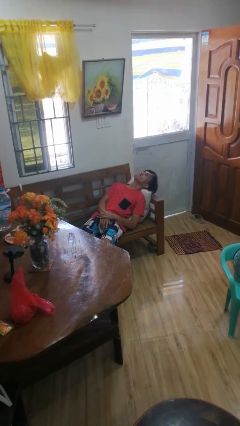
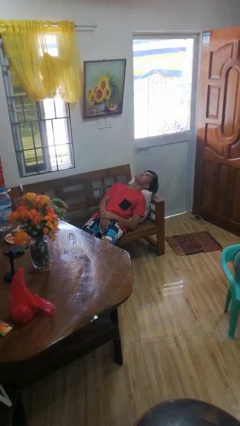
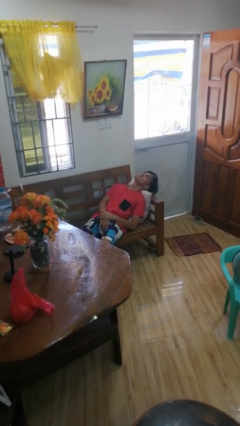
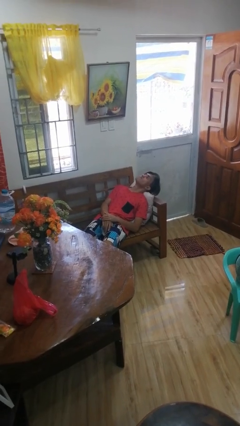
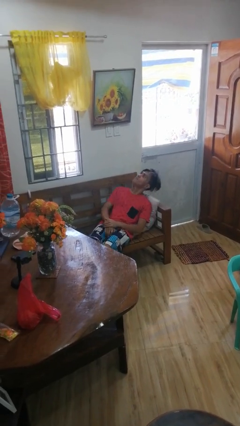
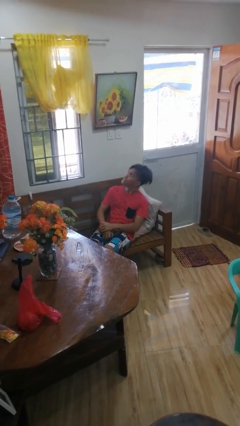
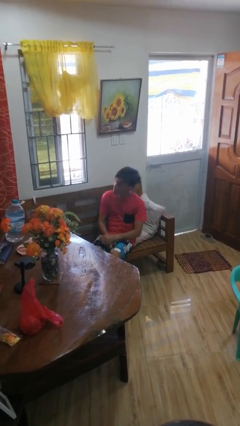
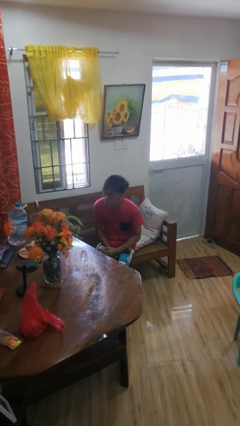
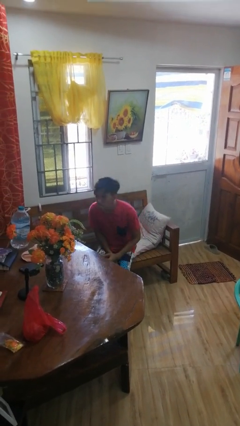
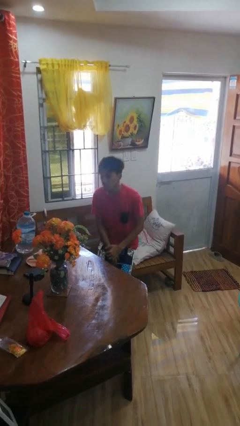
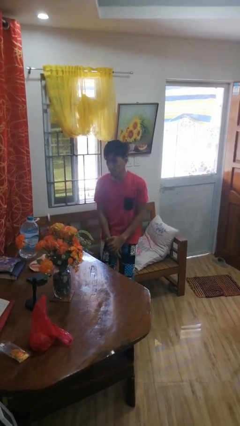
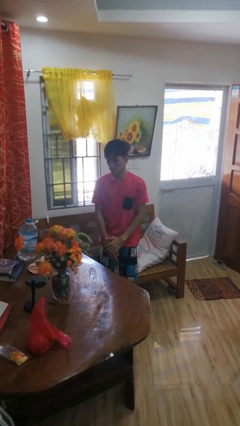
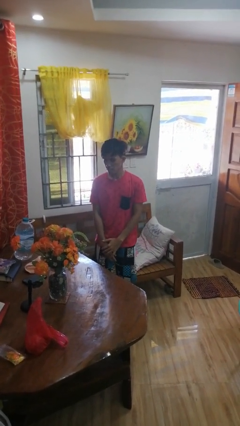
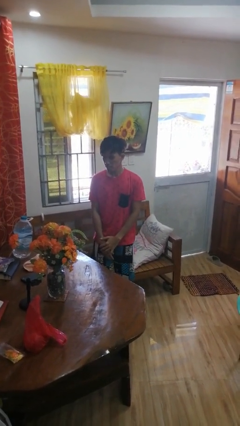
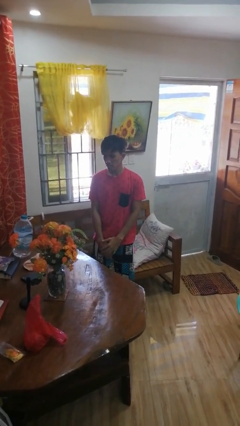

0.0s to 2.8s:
person stands up

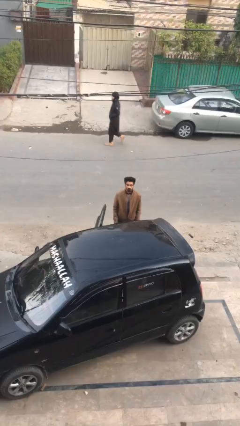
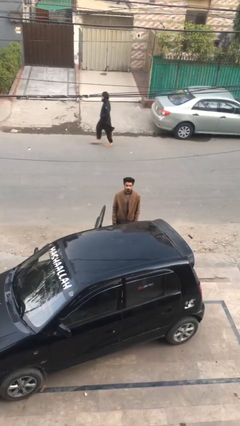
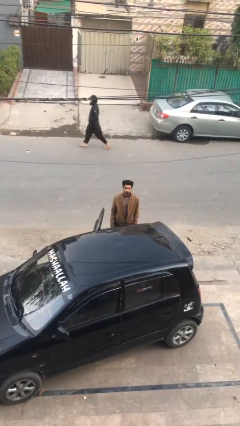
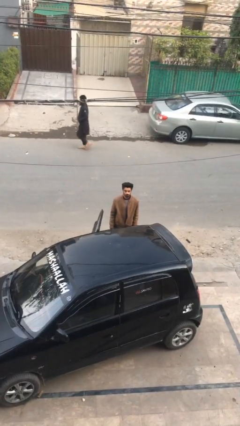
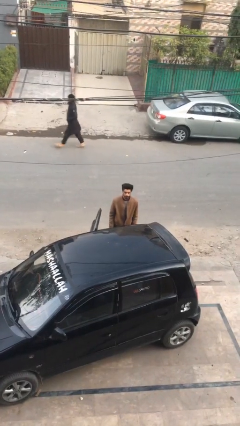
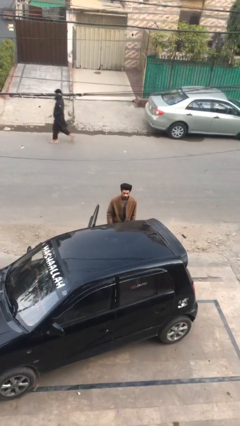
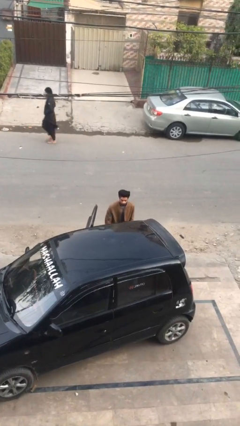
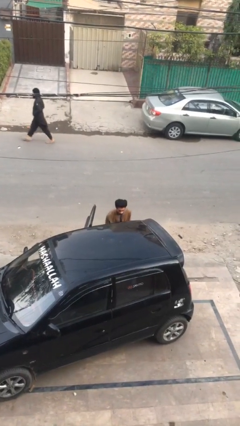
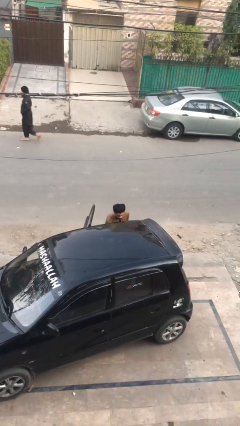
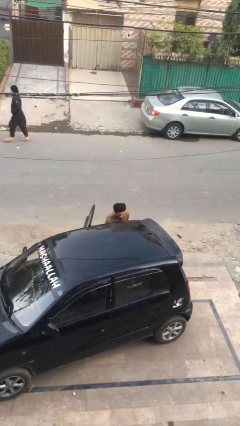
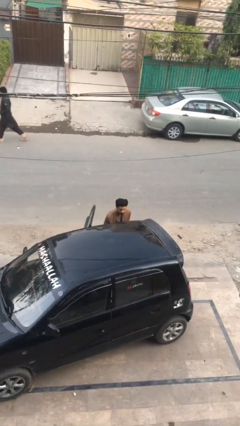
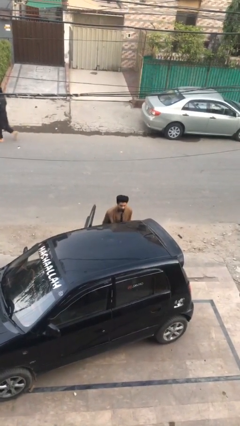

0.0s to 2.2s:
person unloads car

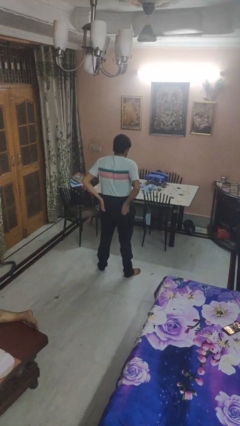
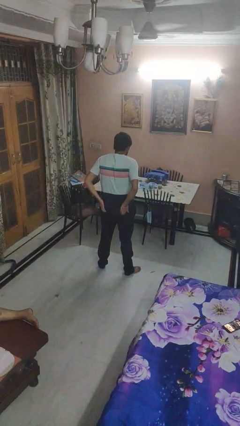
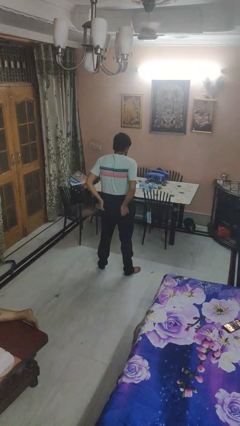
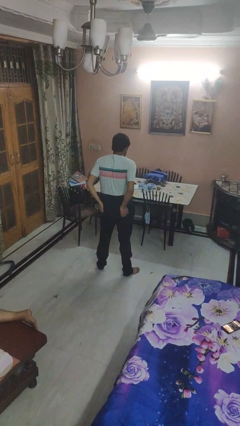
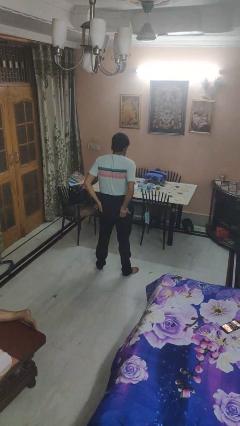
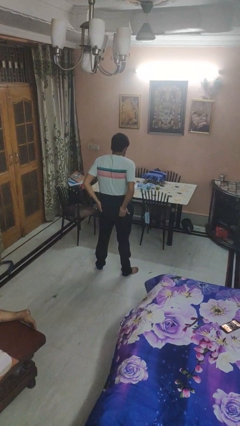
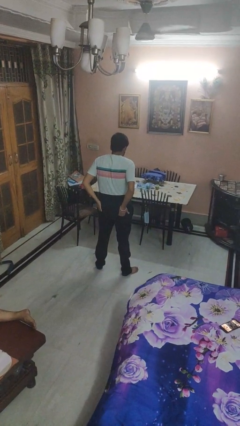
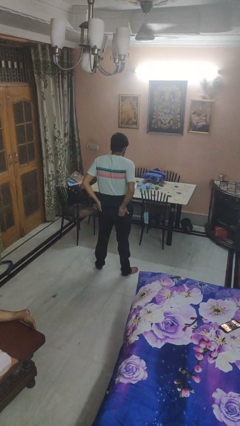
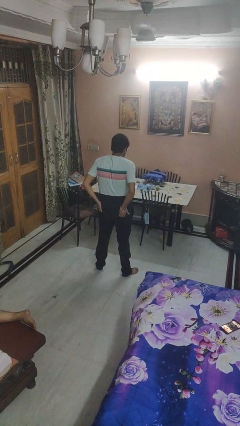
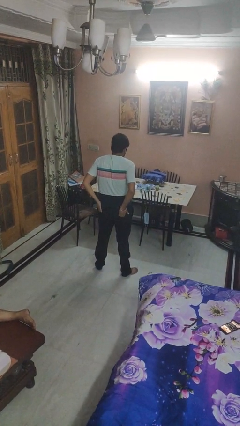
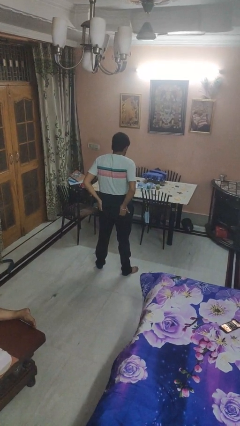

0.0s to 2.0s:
person puts hands in back pockets

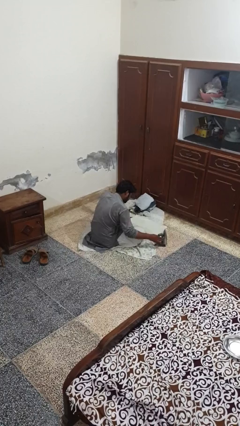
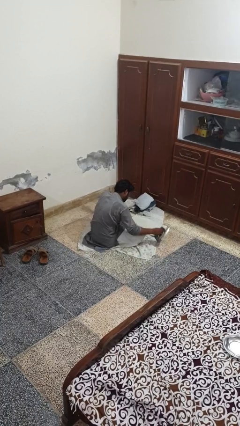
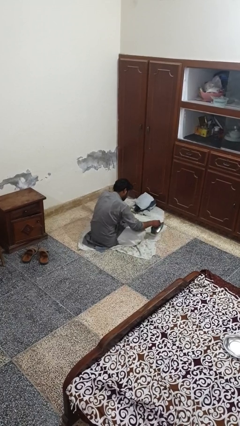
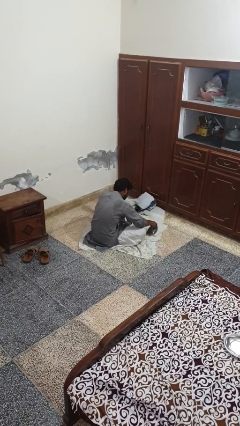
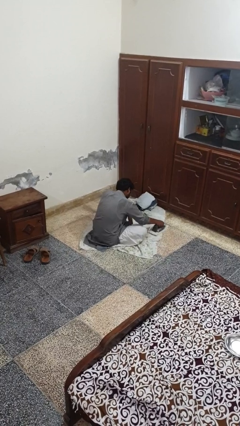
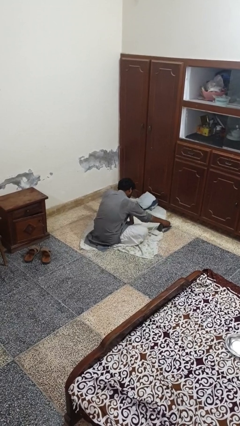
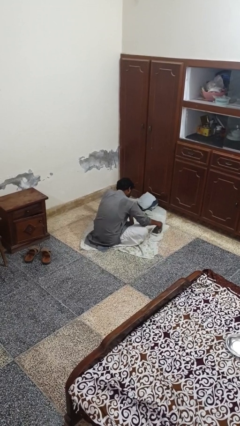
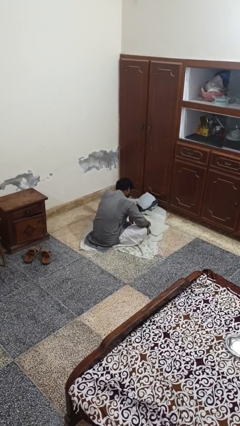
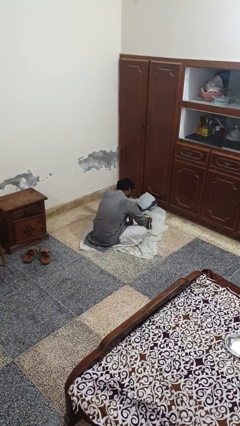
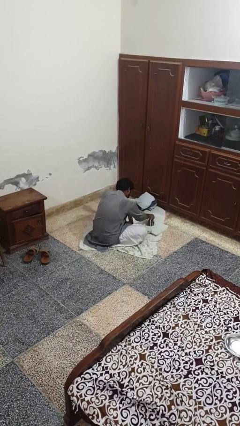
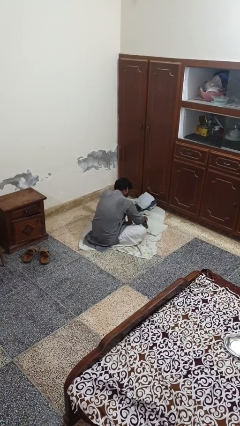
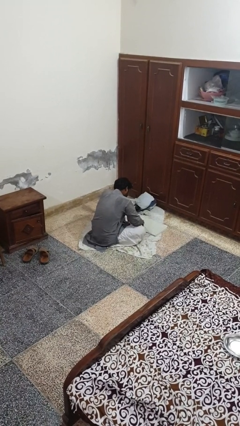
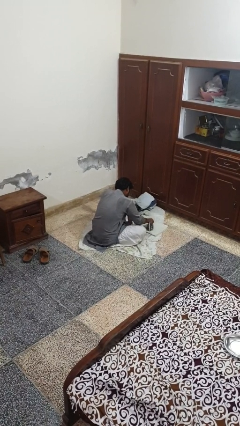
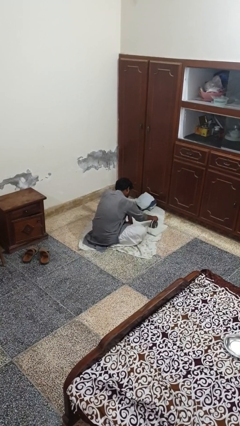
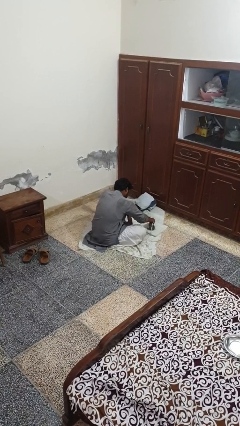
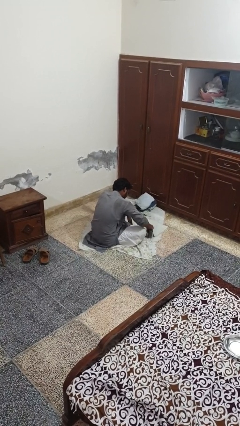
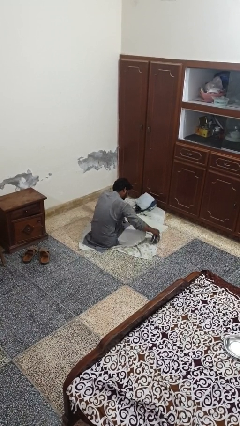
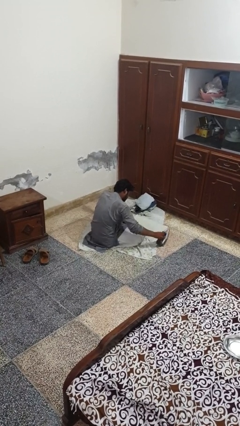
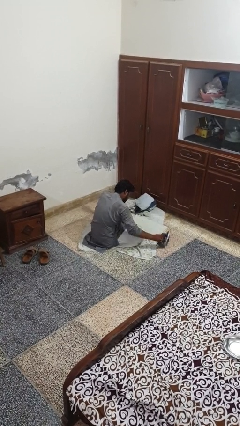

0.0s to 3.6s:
person irons clothes

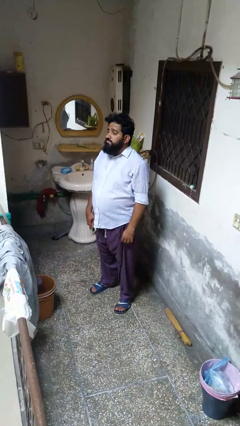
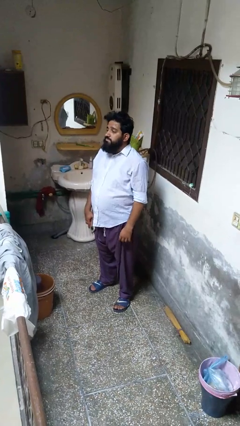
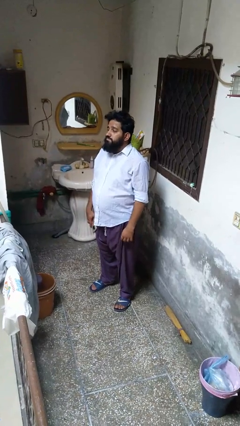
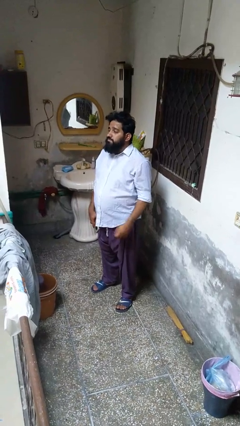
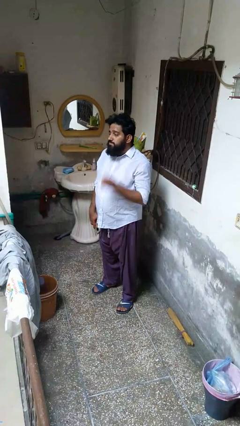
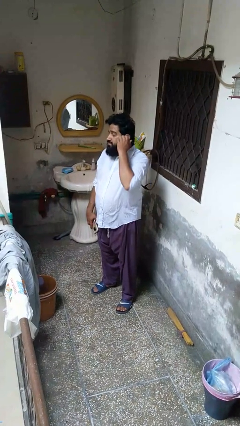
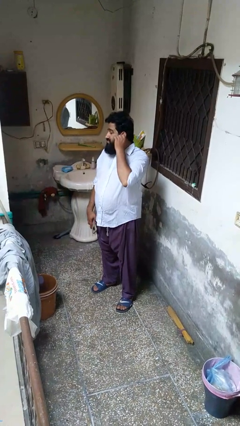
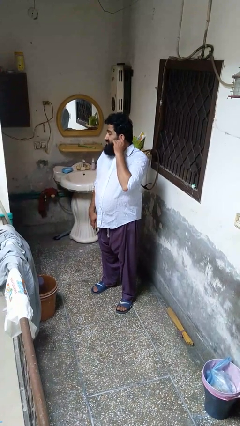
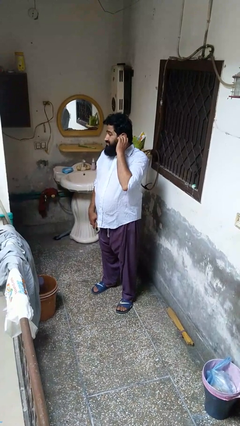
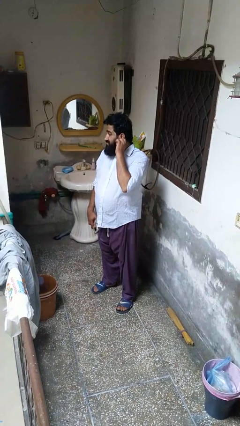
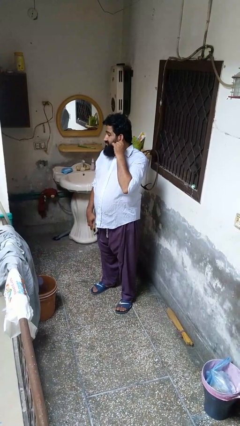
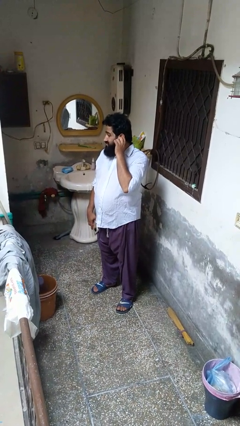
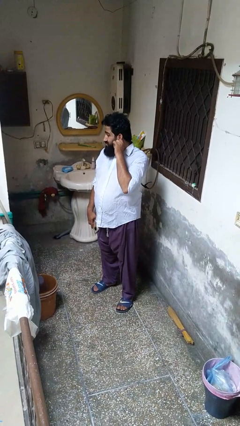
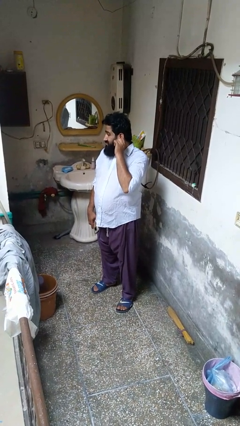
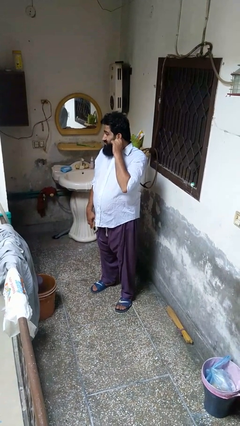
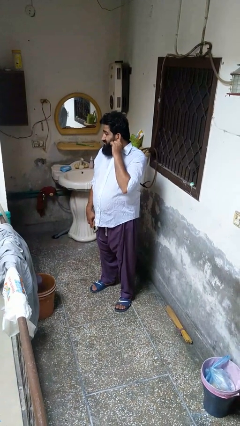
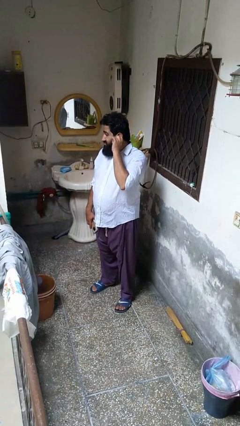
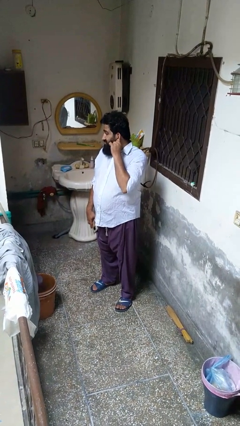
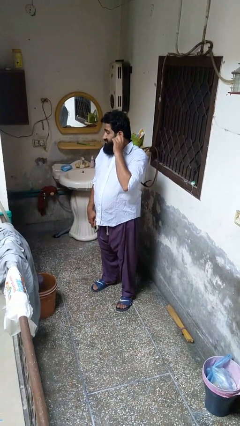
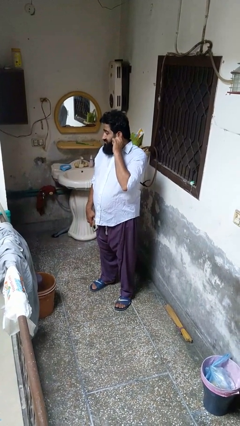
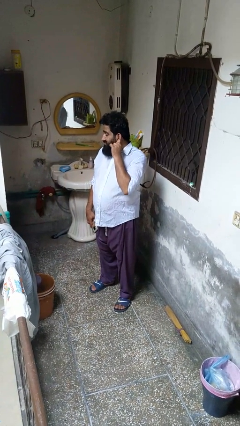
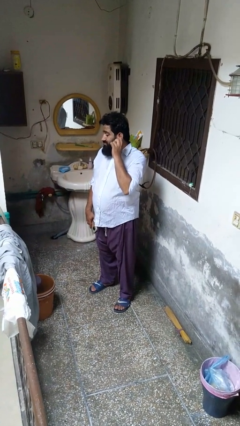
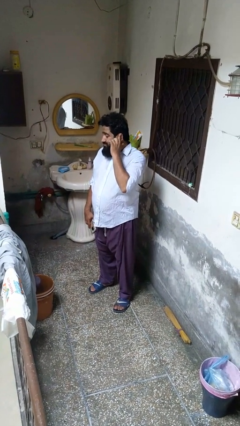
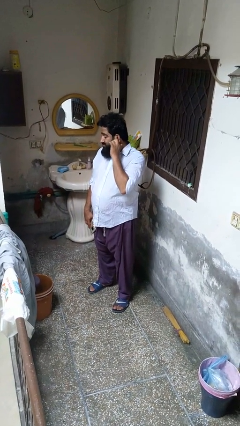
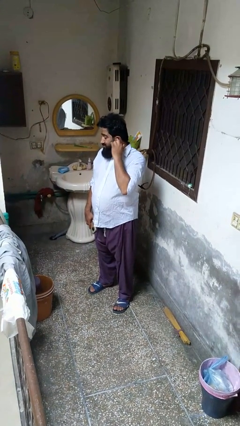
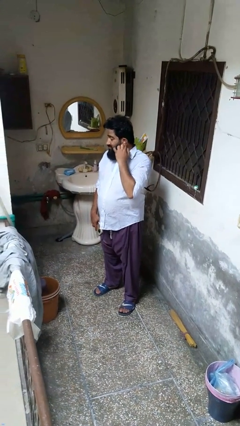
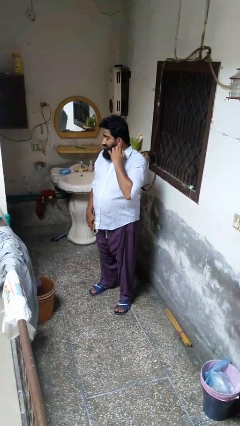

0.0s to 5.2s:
person touches earlobe

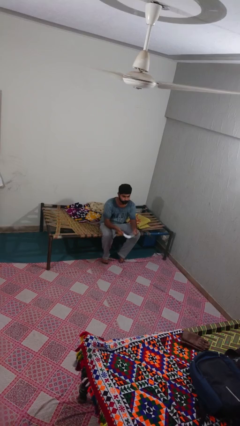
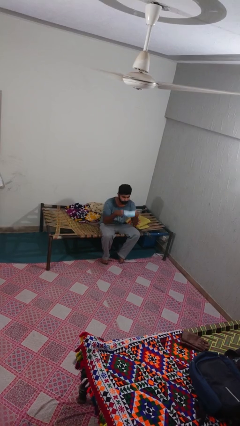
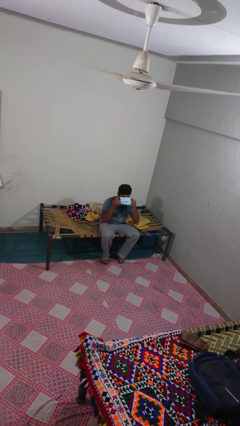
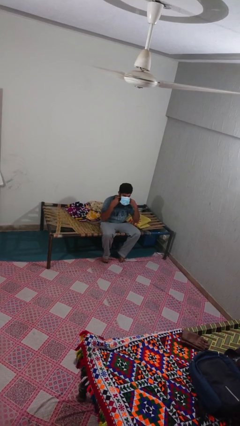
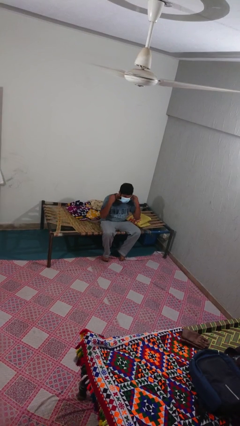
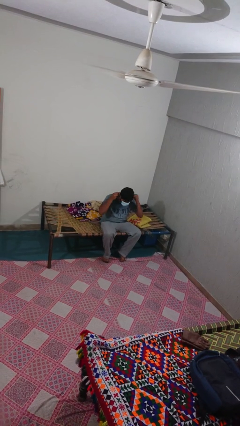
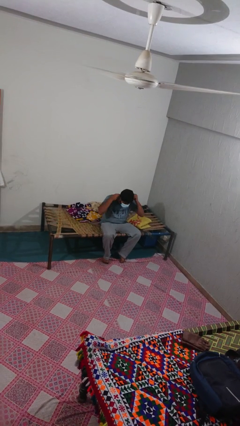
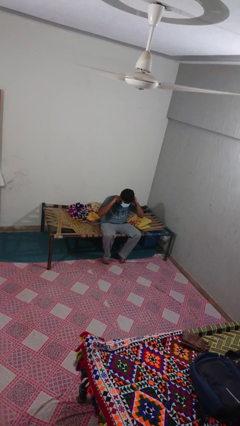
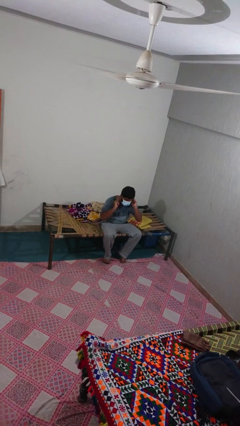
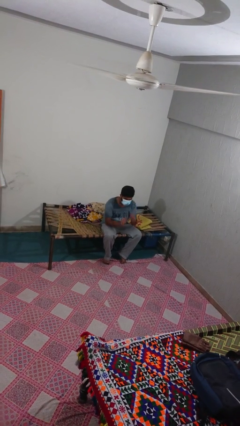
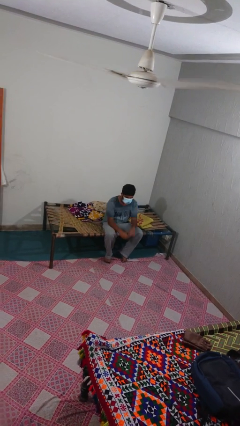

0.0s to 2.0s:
person puts on facemask
